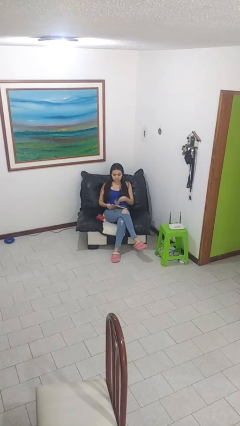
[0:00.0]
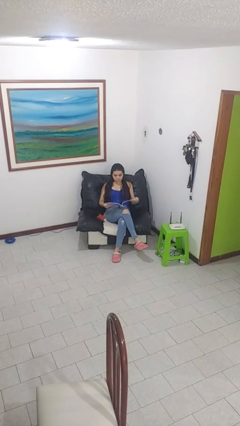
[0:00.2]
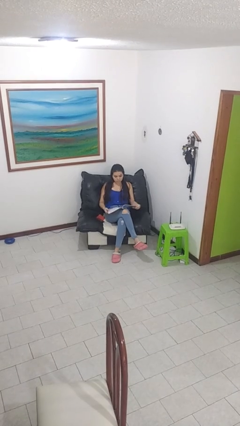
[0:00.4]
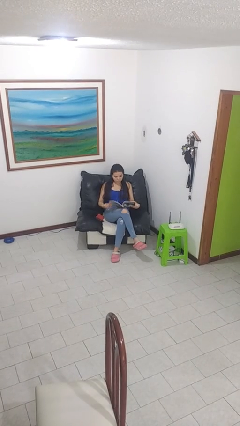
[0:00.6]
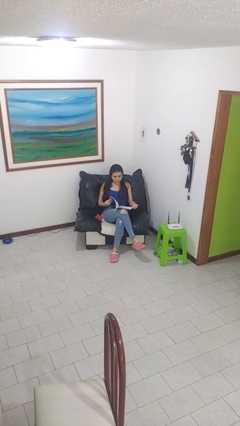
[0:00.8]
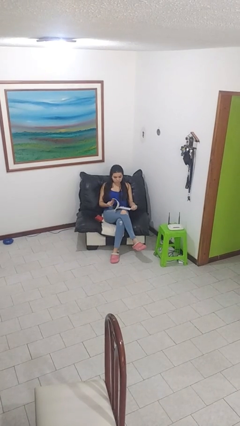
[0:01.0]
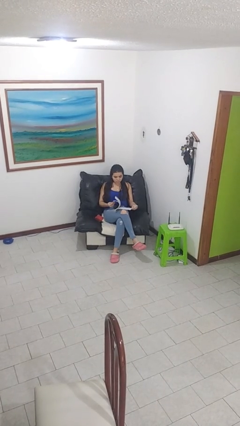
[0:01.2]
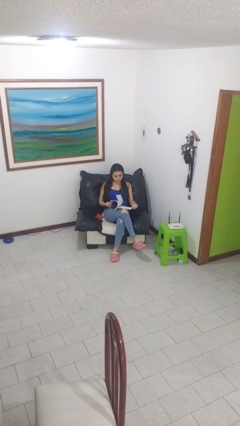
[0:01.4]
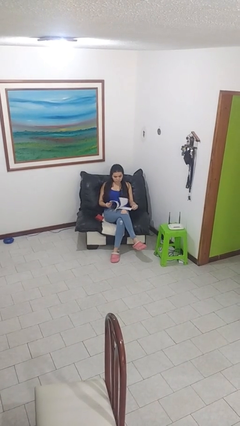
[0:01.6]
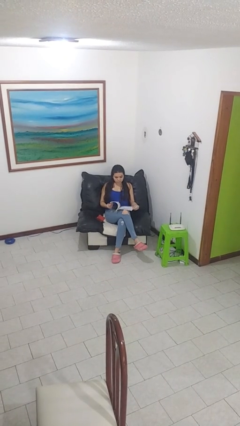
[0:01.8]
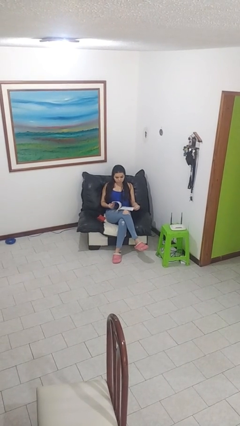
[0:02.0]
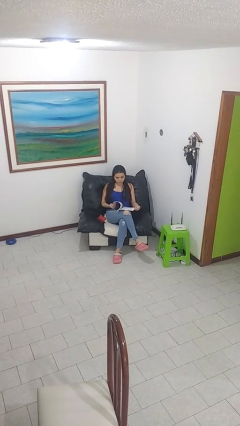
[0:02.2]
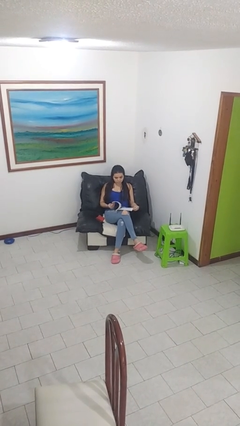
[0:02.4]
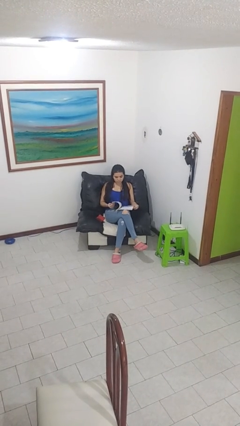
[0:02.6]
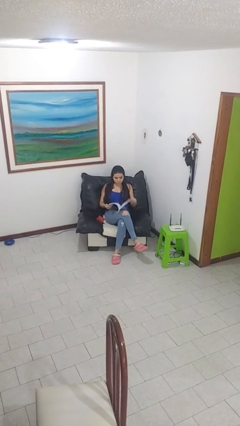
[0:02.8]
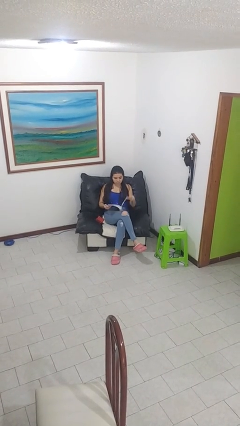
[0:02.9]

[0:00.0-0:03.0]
person reads magazine

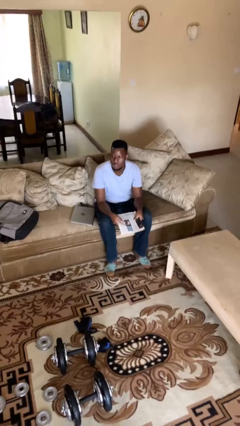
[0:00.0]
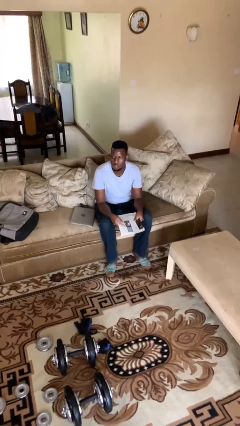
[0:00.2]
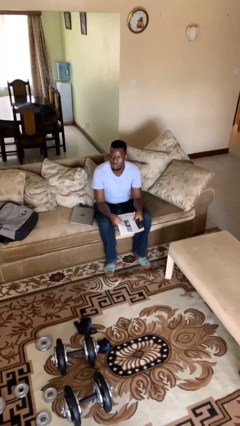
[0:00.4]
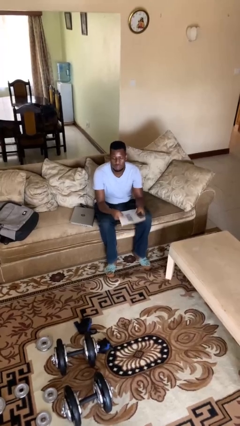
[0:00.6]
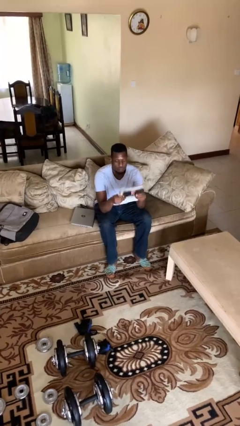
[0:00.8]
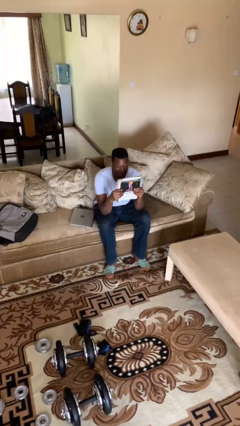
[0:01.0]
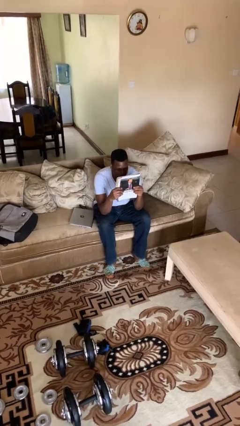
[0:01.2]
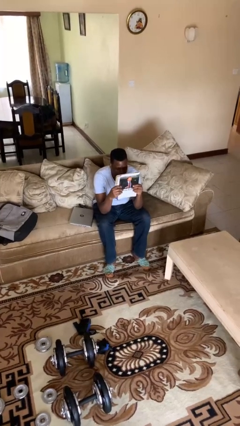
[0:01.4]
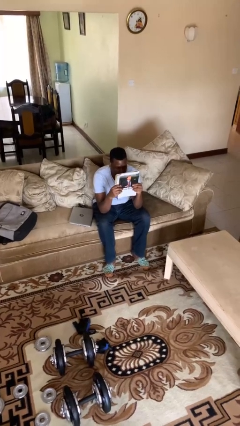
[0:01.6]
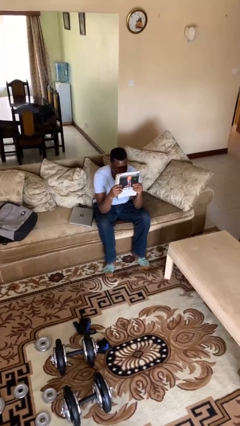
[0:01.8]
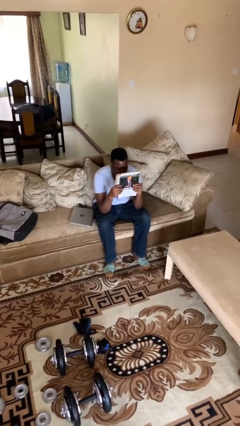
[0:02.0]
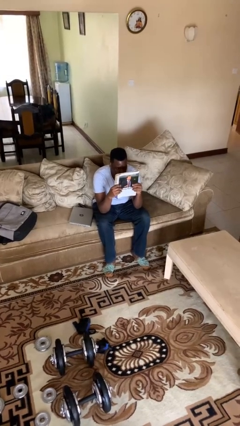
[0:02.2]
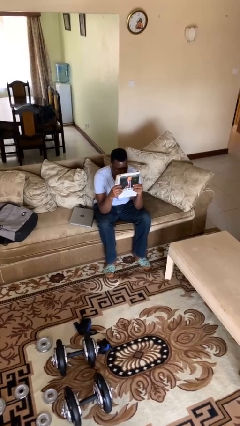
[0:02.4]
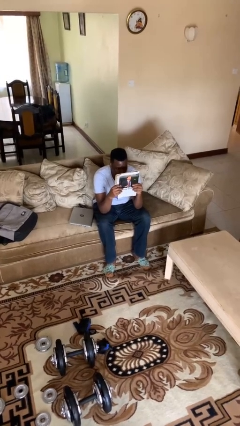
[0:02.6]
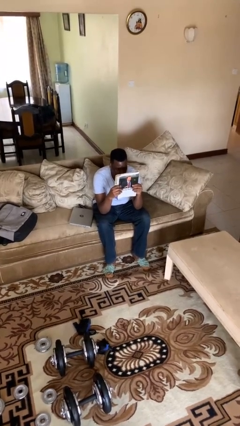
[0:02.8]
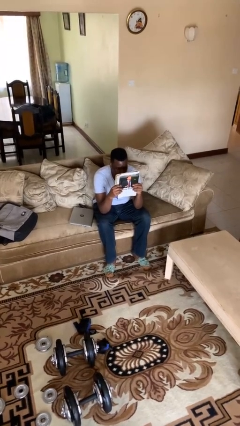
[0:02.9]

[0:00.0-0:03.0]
person reads document

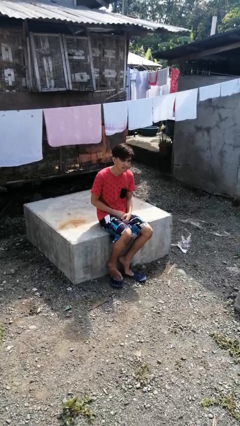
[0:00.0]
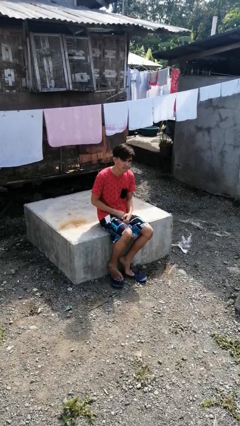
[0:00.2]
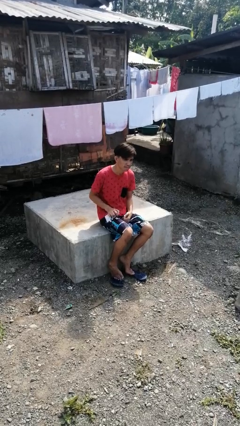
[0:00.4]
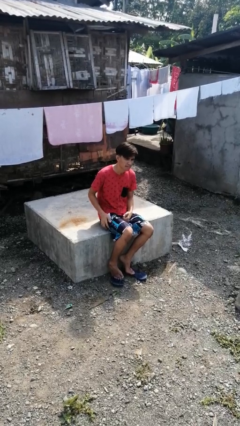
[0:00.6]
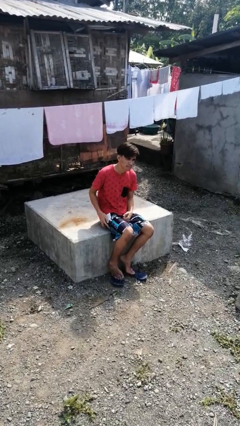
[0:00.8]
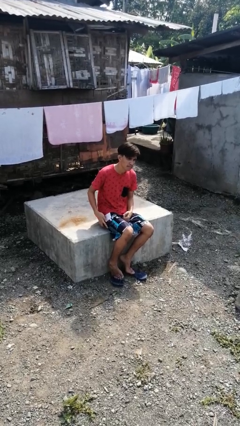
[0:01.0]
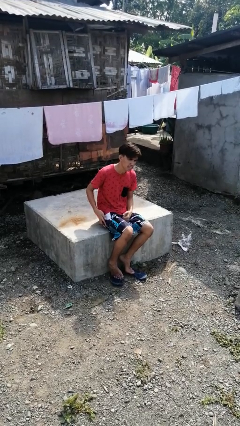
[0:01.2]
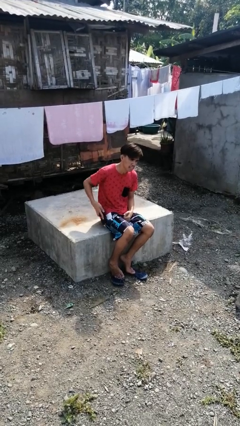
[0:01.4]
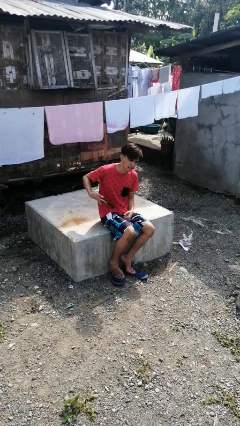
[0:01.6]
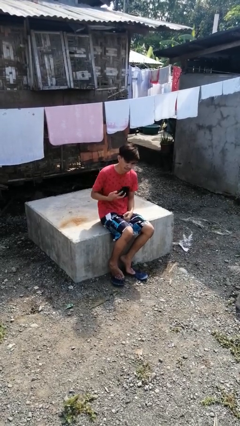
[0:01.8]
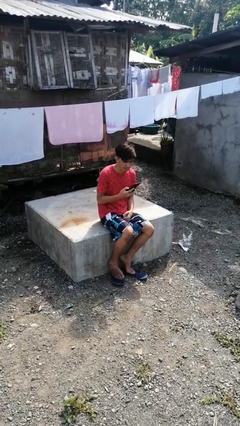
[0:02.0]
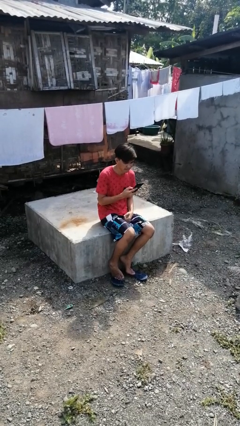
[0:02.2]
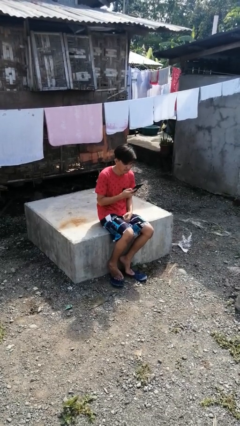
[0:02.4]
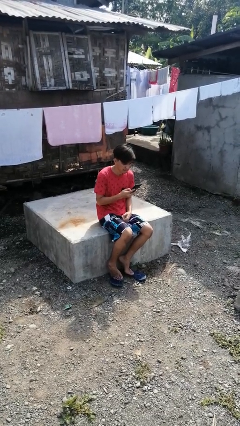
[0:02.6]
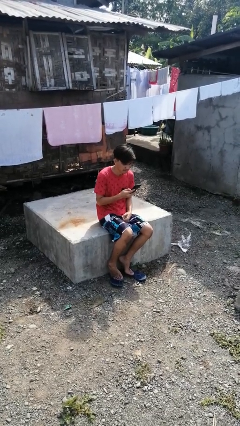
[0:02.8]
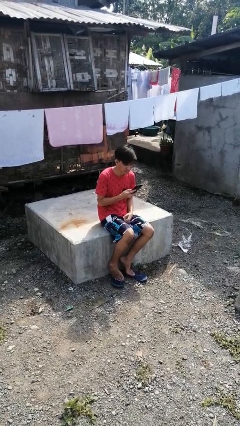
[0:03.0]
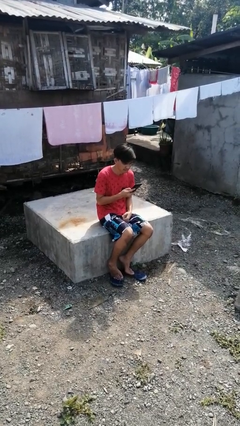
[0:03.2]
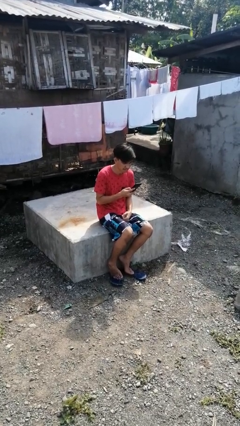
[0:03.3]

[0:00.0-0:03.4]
person takes phone from pocket

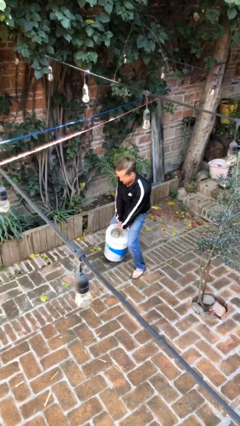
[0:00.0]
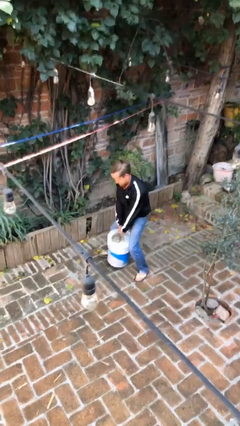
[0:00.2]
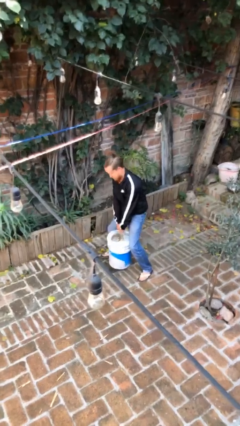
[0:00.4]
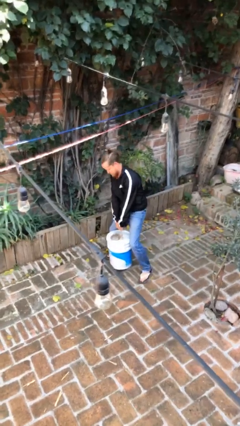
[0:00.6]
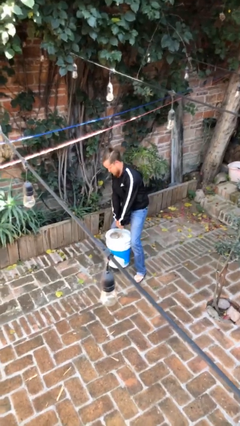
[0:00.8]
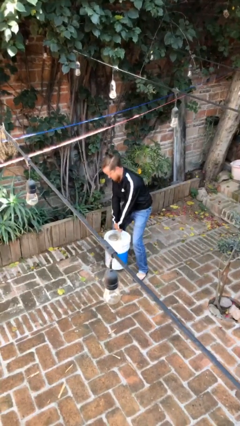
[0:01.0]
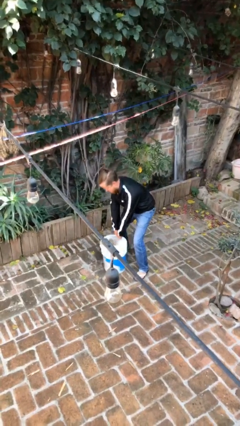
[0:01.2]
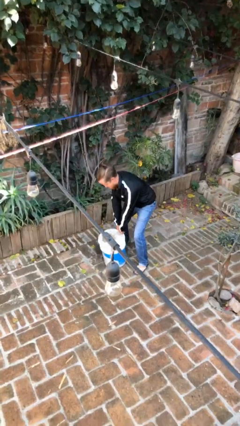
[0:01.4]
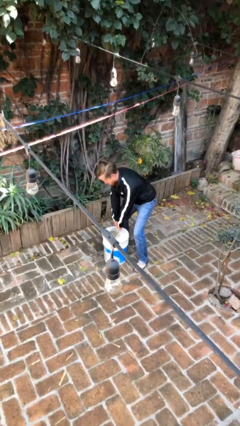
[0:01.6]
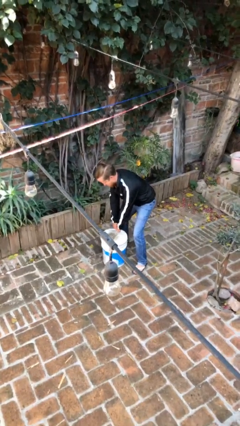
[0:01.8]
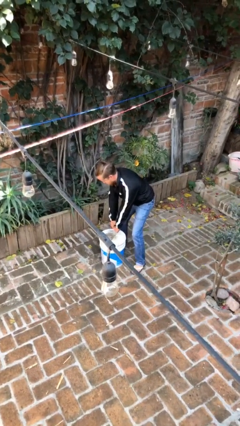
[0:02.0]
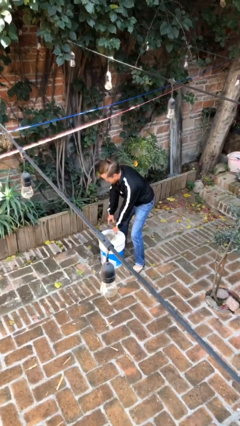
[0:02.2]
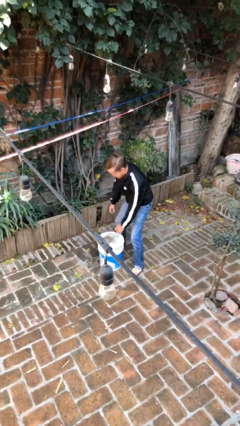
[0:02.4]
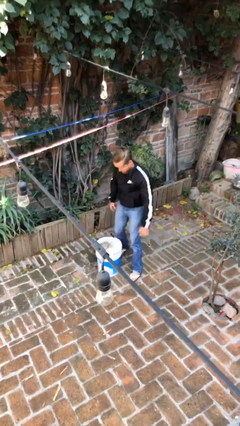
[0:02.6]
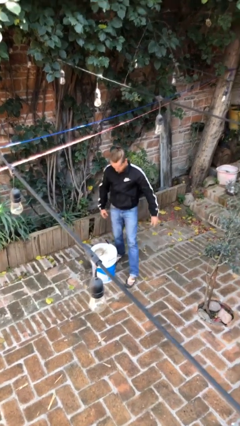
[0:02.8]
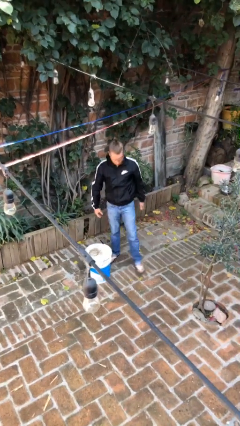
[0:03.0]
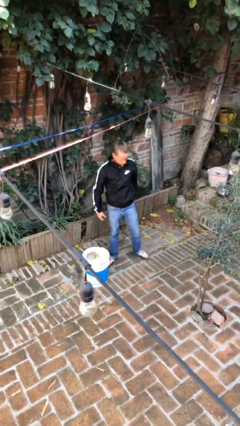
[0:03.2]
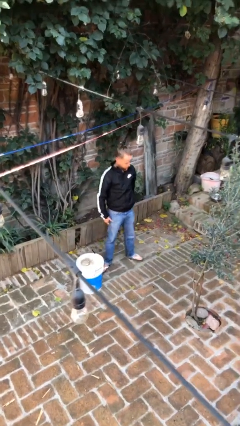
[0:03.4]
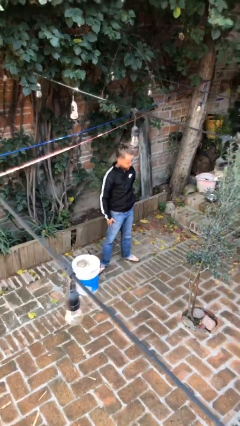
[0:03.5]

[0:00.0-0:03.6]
person puts down object on floor

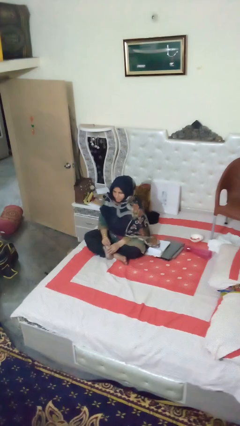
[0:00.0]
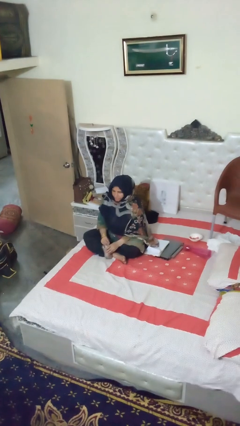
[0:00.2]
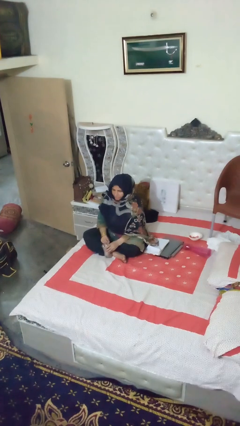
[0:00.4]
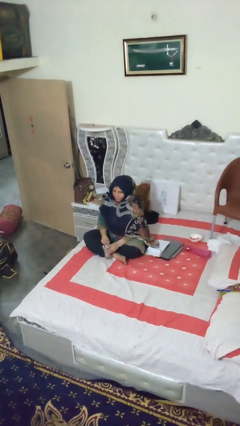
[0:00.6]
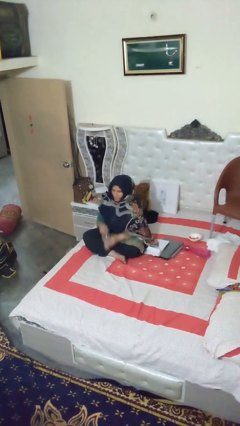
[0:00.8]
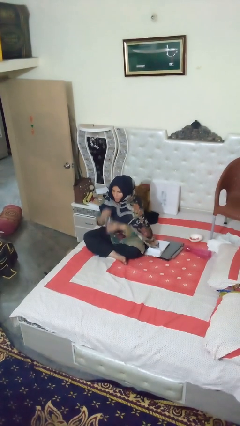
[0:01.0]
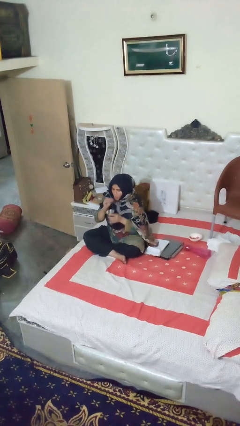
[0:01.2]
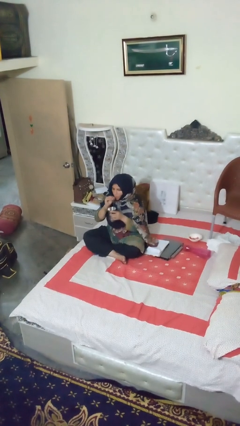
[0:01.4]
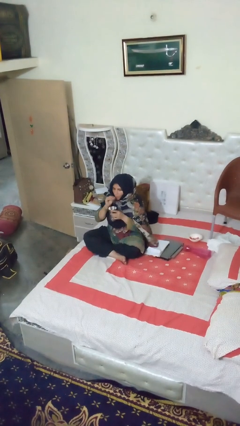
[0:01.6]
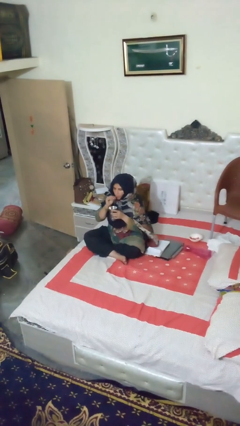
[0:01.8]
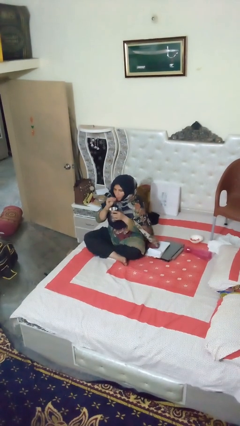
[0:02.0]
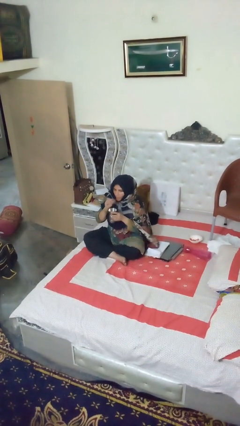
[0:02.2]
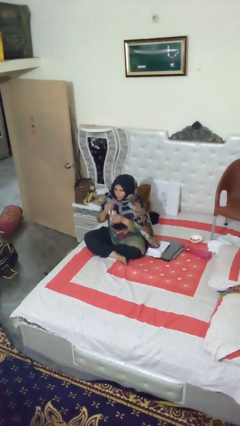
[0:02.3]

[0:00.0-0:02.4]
person drinks from straw

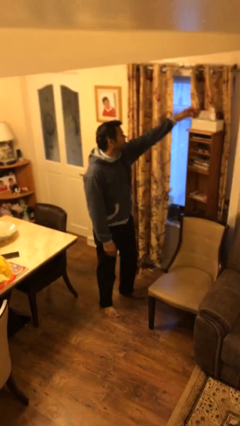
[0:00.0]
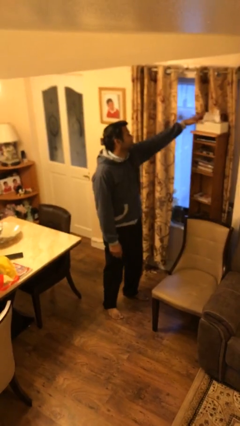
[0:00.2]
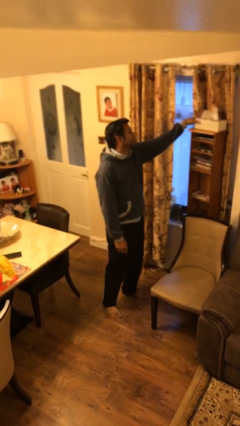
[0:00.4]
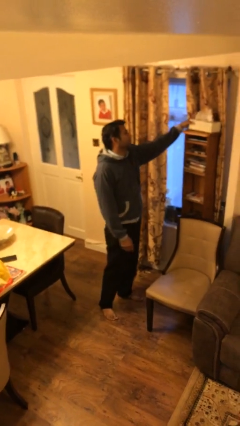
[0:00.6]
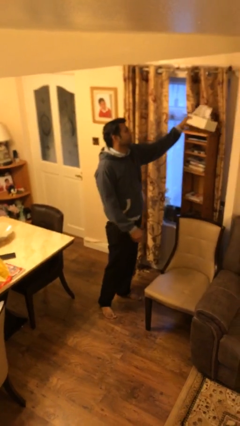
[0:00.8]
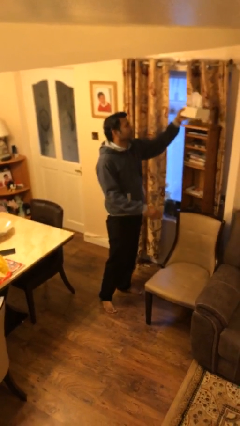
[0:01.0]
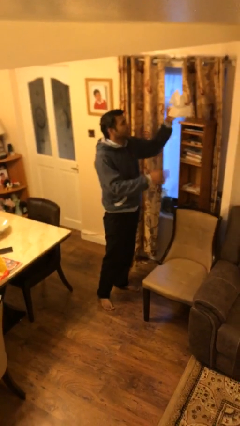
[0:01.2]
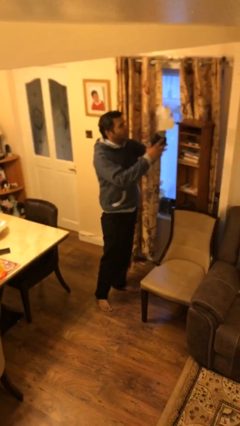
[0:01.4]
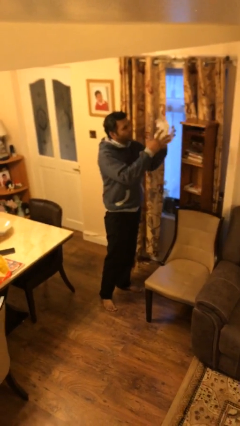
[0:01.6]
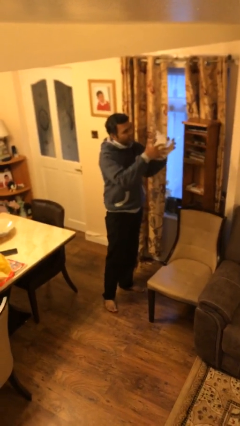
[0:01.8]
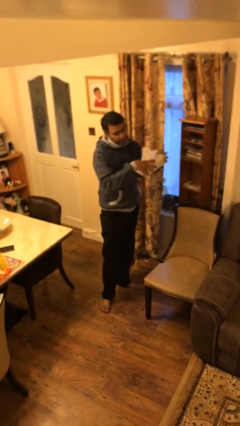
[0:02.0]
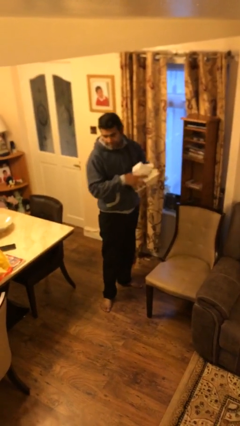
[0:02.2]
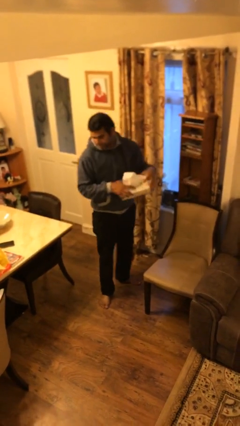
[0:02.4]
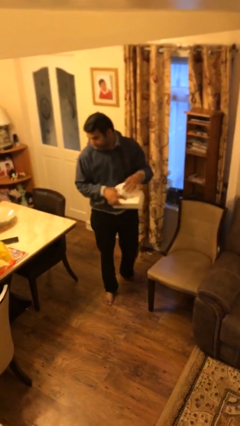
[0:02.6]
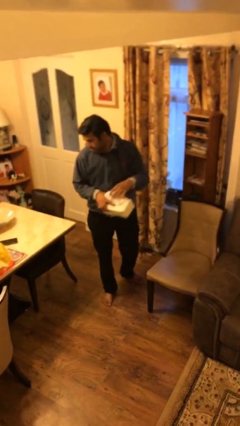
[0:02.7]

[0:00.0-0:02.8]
person picks up object from shelf
